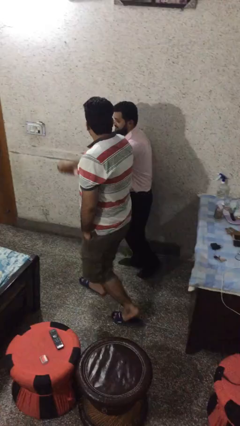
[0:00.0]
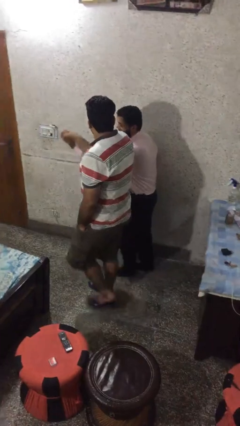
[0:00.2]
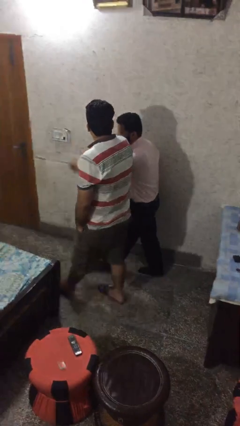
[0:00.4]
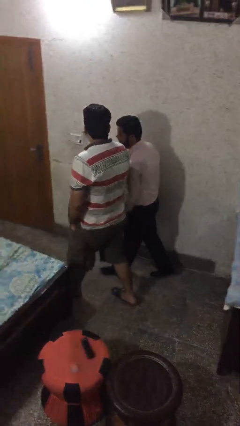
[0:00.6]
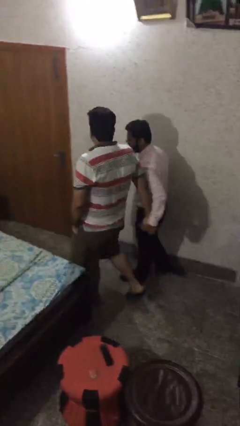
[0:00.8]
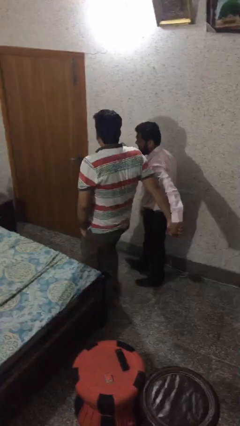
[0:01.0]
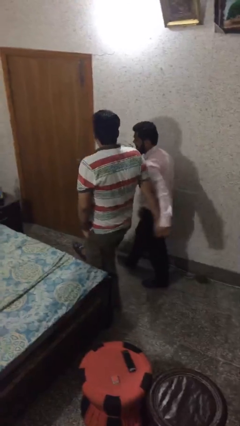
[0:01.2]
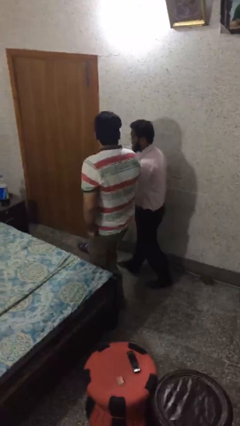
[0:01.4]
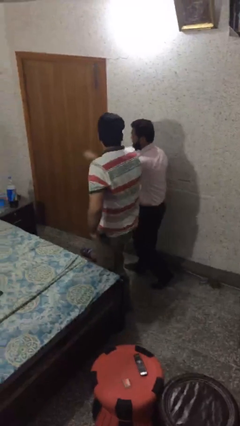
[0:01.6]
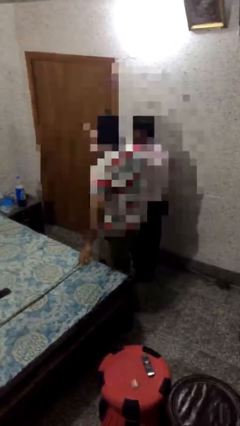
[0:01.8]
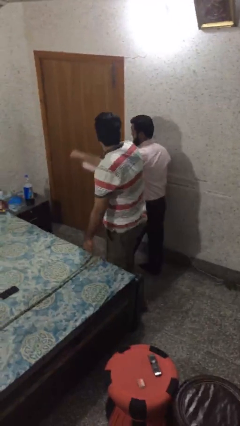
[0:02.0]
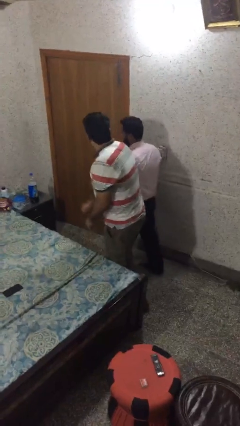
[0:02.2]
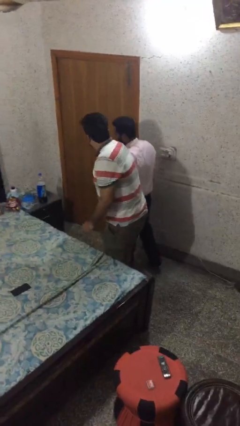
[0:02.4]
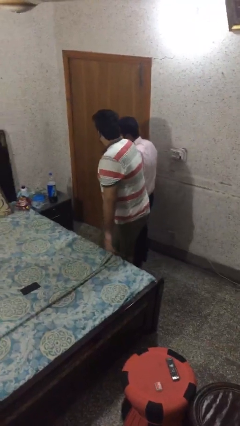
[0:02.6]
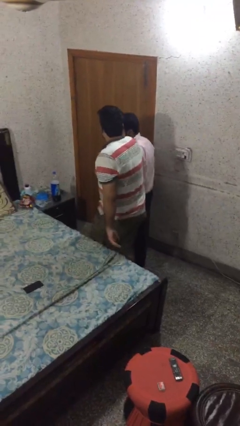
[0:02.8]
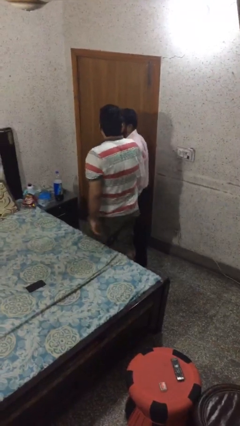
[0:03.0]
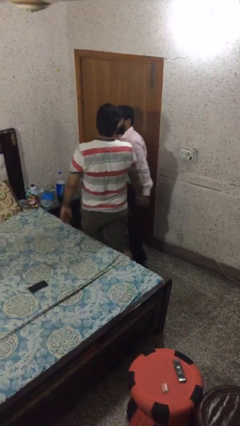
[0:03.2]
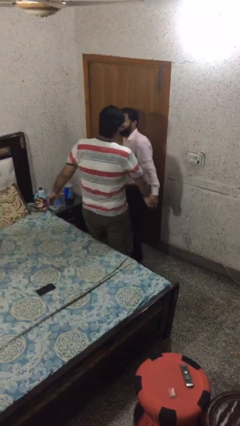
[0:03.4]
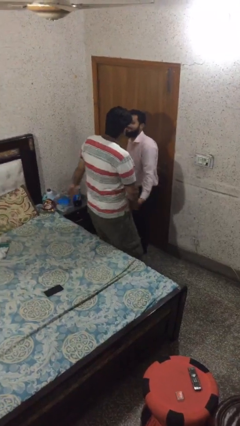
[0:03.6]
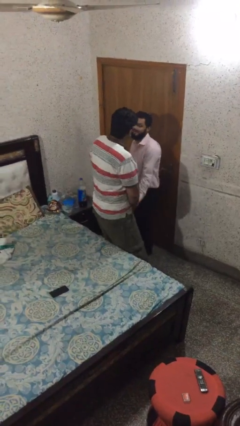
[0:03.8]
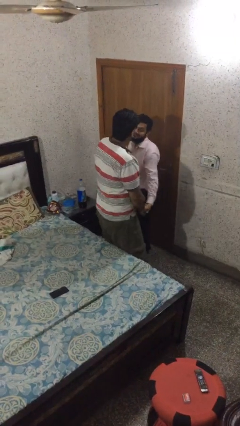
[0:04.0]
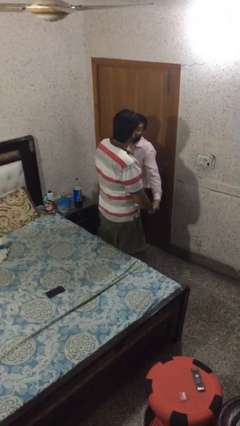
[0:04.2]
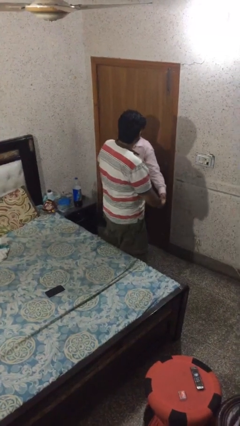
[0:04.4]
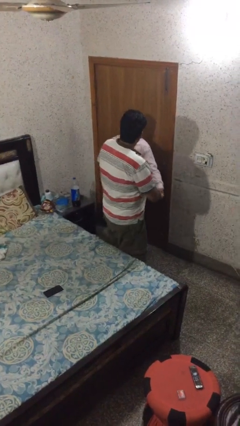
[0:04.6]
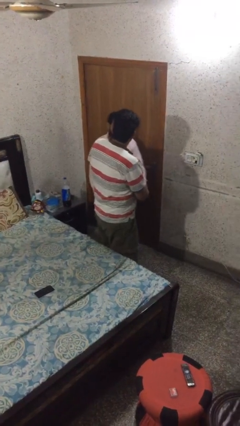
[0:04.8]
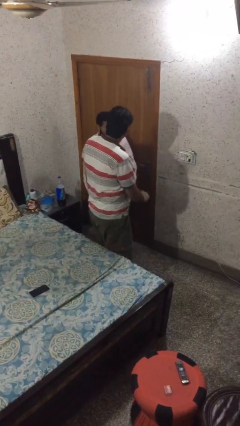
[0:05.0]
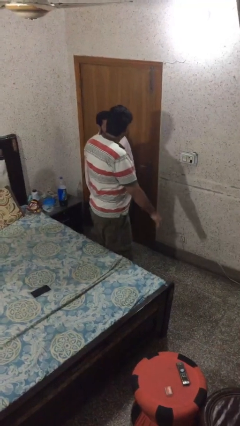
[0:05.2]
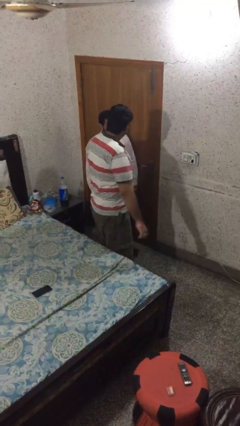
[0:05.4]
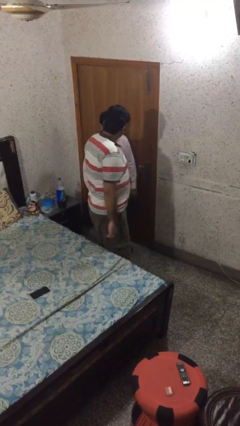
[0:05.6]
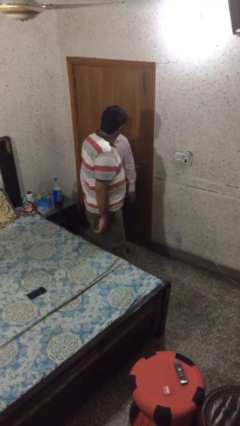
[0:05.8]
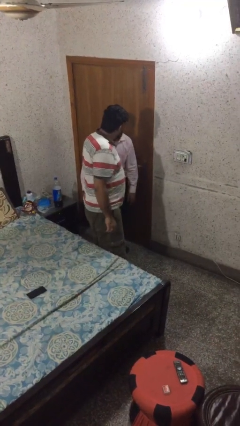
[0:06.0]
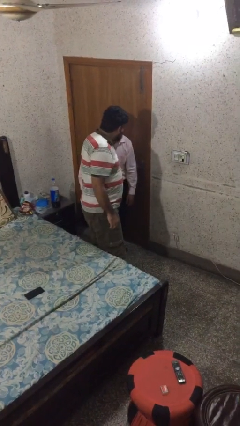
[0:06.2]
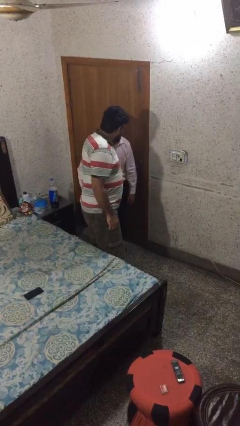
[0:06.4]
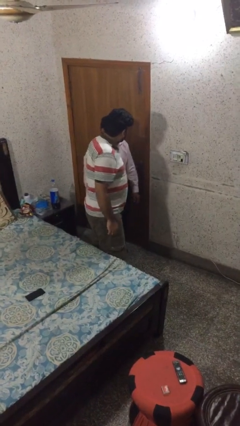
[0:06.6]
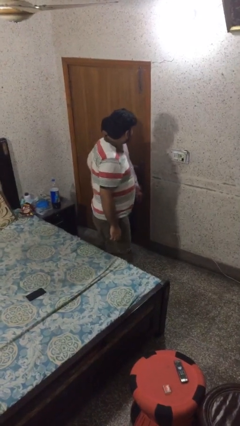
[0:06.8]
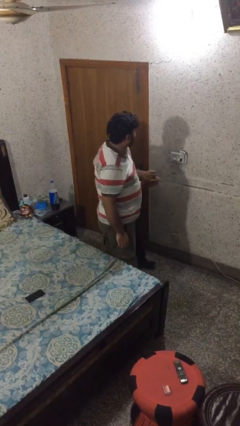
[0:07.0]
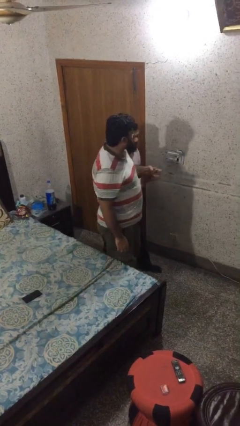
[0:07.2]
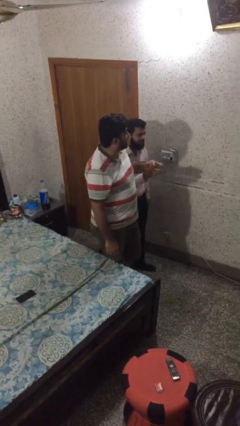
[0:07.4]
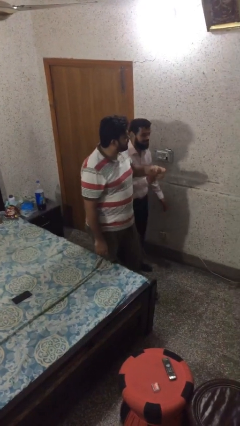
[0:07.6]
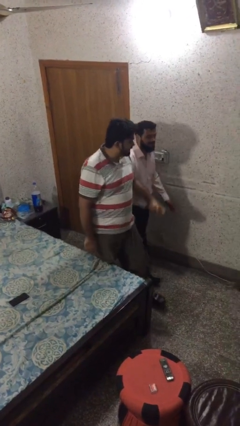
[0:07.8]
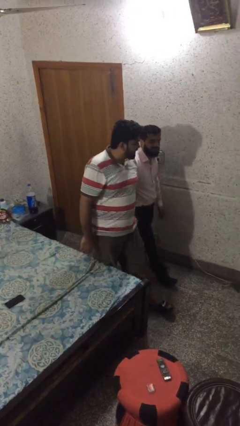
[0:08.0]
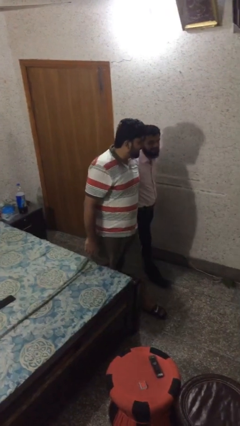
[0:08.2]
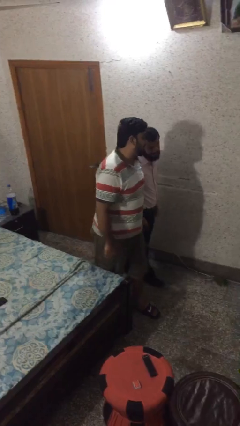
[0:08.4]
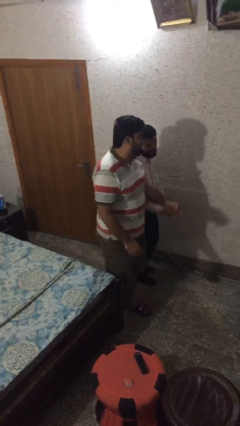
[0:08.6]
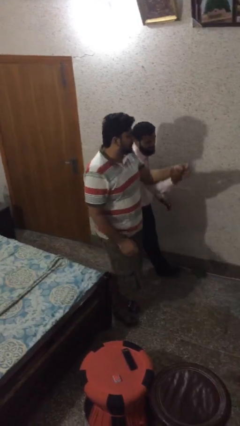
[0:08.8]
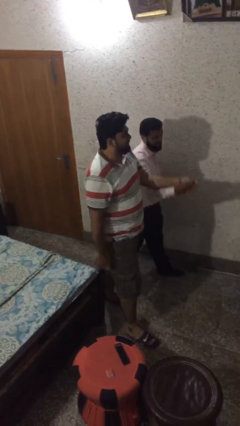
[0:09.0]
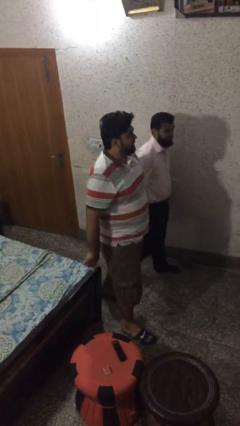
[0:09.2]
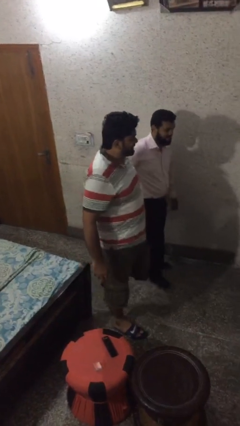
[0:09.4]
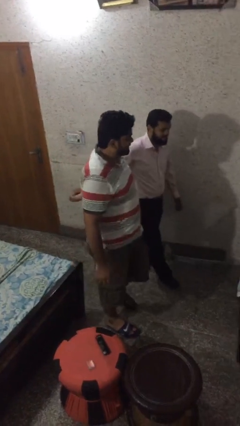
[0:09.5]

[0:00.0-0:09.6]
person holds hand

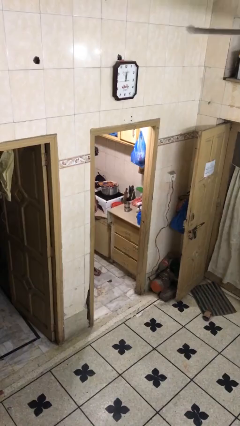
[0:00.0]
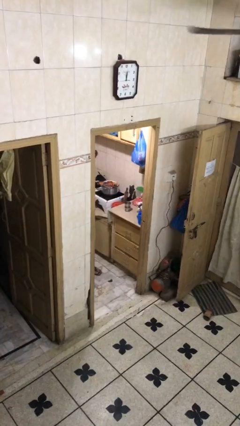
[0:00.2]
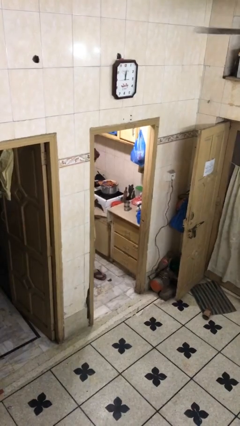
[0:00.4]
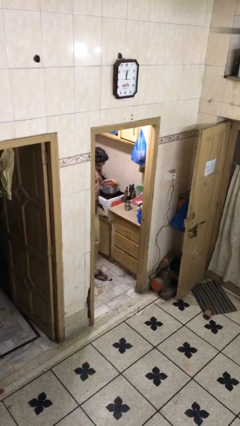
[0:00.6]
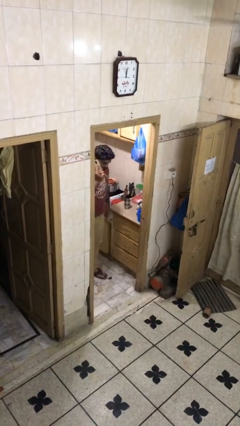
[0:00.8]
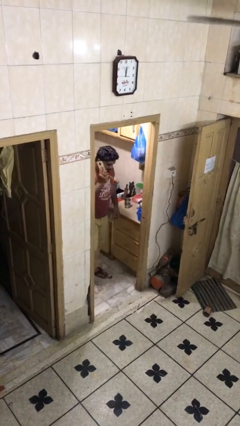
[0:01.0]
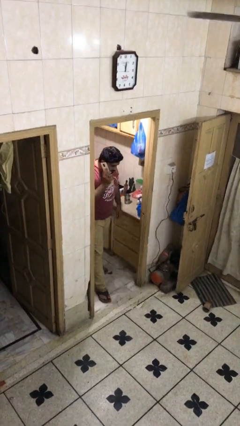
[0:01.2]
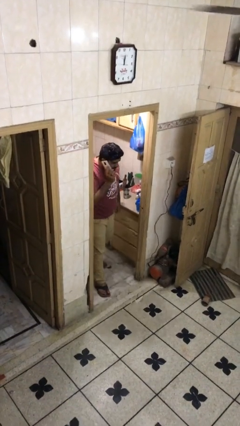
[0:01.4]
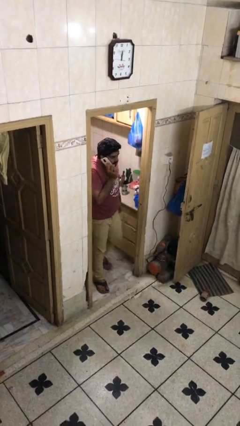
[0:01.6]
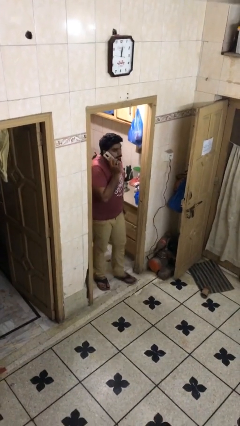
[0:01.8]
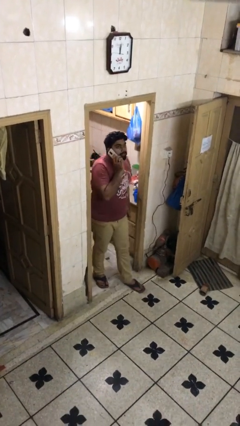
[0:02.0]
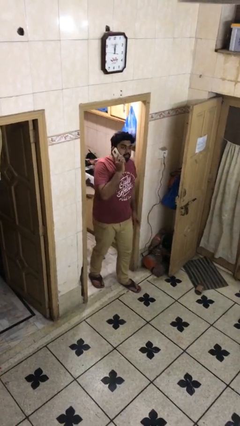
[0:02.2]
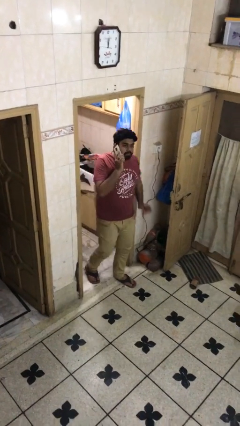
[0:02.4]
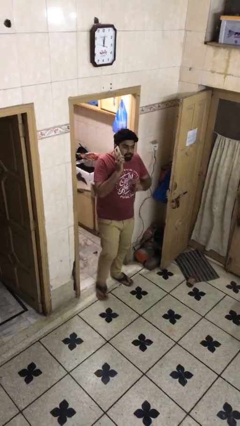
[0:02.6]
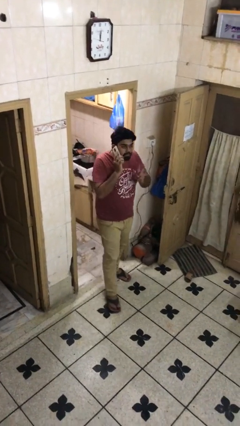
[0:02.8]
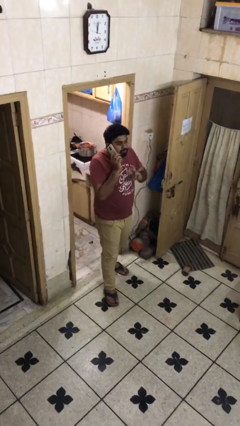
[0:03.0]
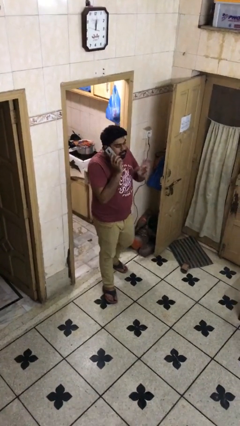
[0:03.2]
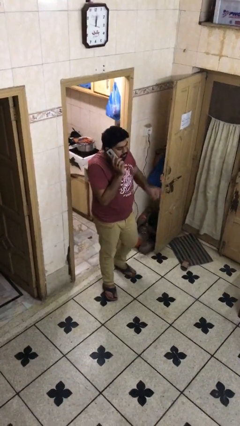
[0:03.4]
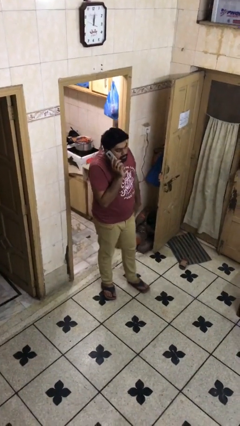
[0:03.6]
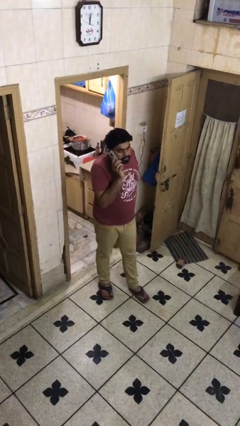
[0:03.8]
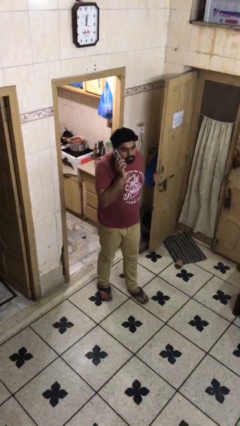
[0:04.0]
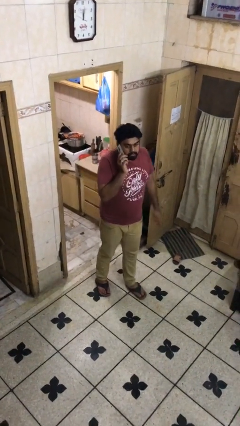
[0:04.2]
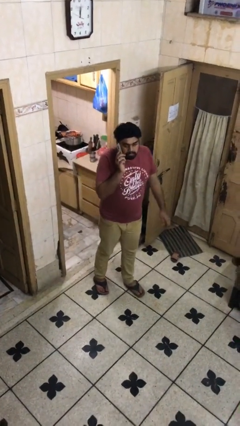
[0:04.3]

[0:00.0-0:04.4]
person enters scene through structure

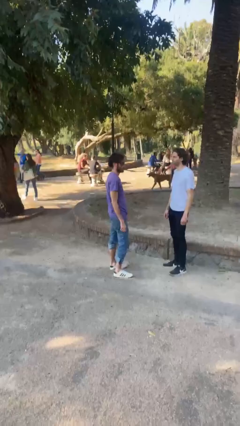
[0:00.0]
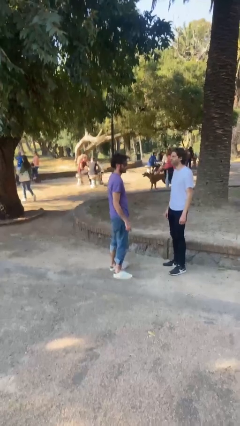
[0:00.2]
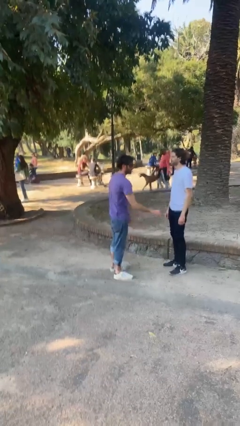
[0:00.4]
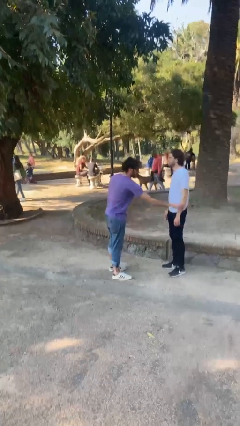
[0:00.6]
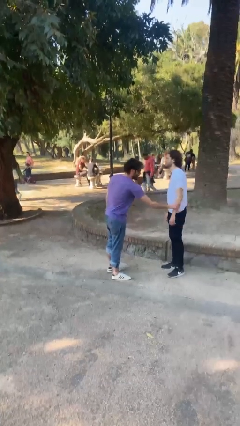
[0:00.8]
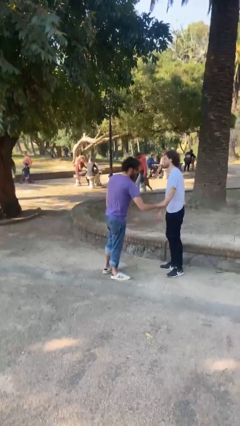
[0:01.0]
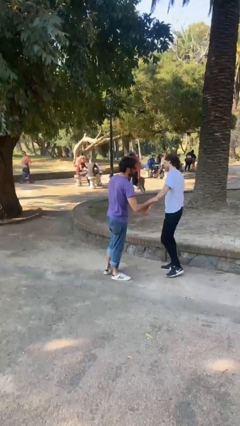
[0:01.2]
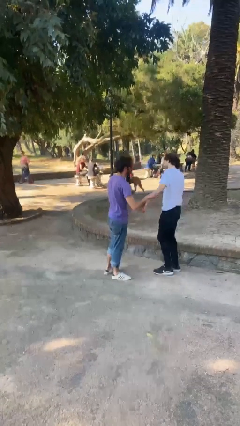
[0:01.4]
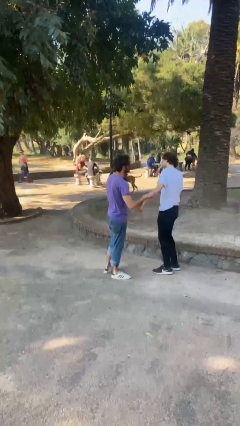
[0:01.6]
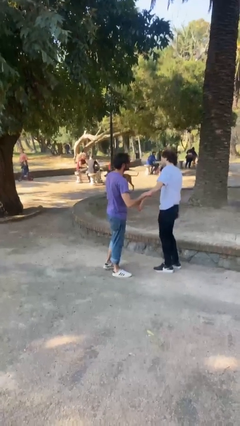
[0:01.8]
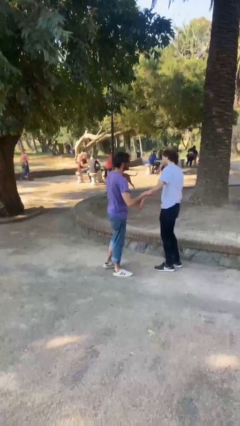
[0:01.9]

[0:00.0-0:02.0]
person grabs person by forearm

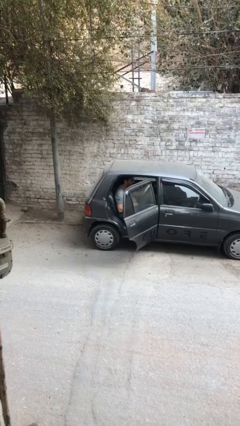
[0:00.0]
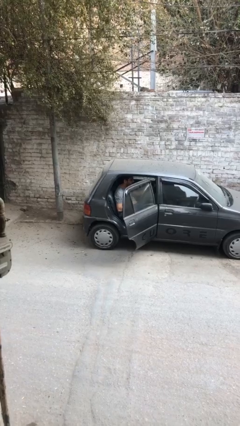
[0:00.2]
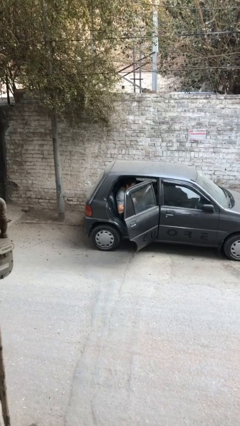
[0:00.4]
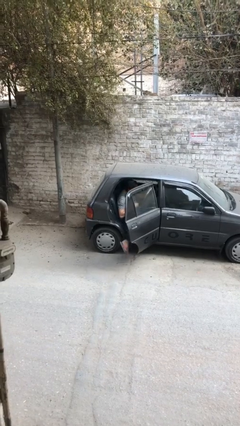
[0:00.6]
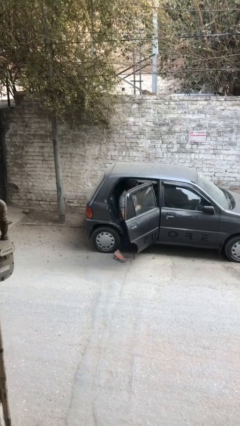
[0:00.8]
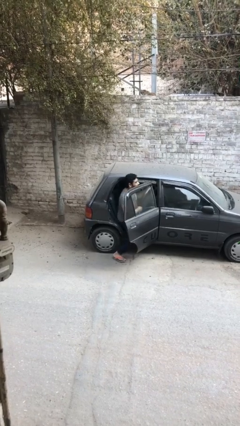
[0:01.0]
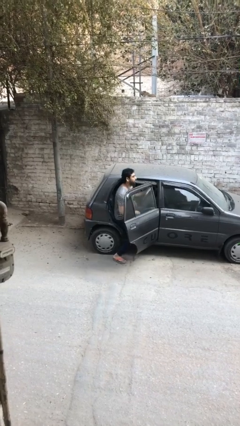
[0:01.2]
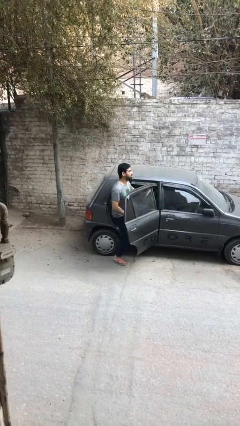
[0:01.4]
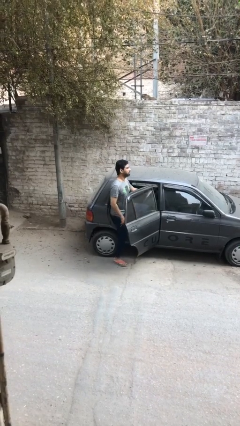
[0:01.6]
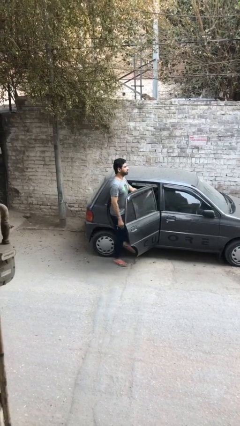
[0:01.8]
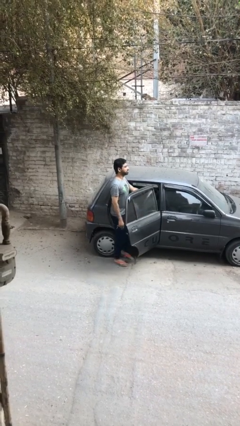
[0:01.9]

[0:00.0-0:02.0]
person exits car
